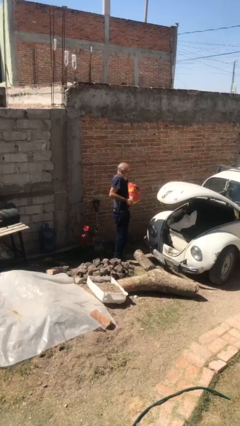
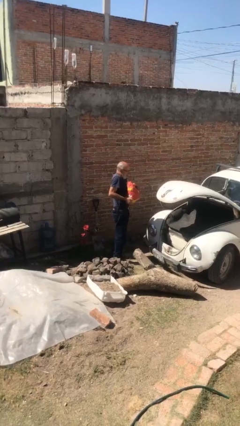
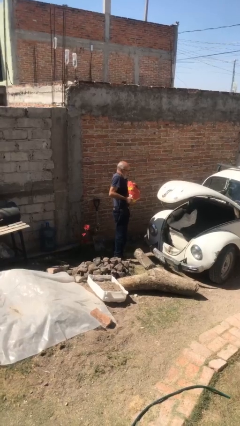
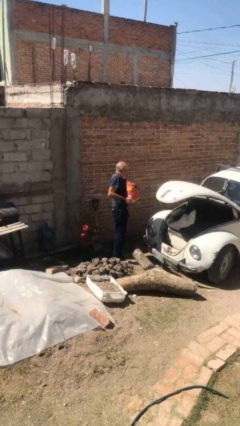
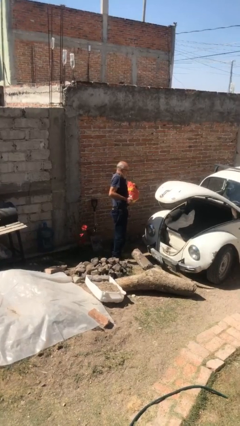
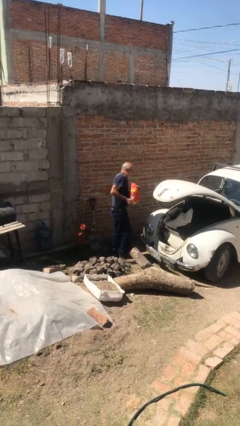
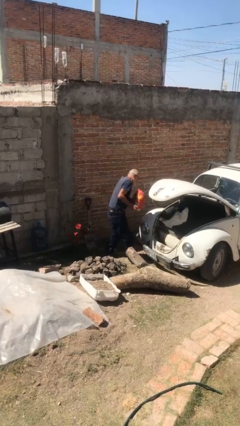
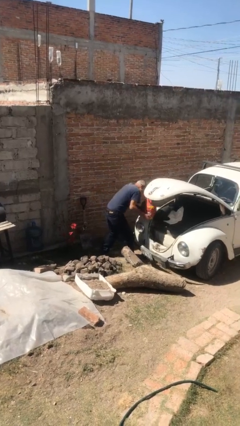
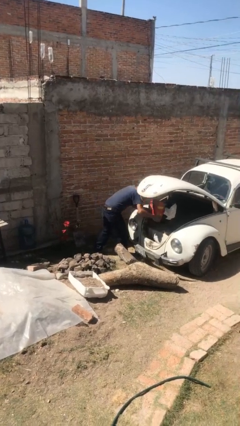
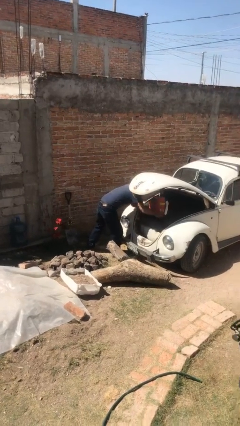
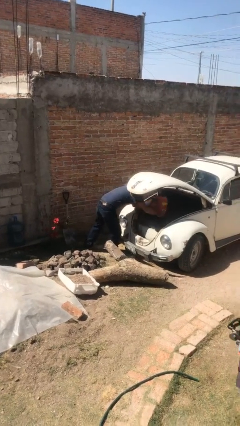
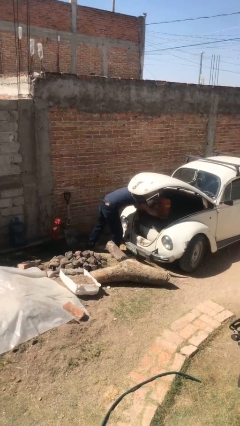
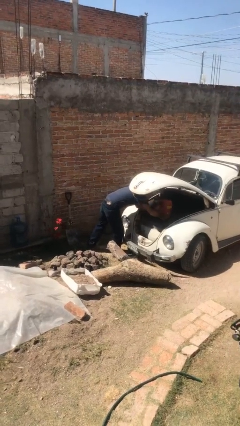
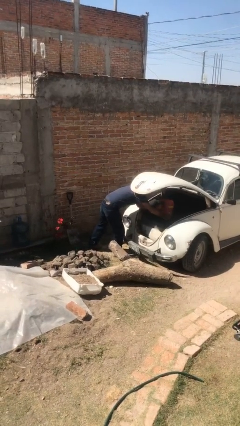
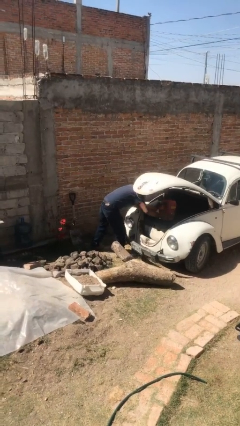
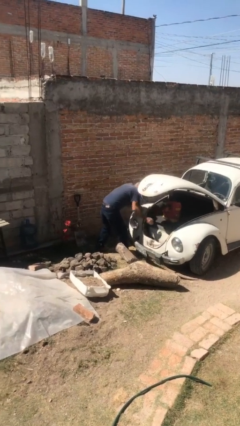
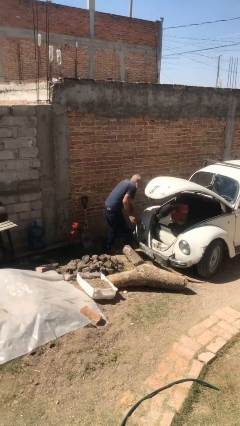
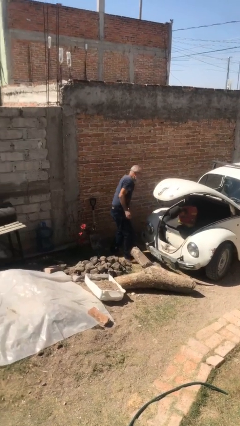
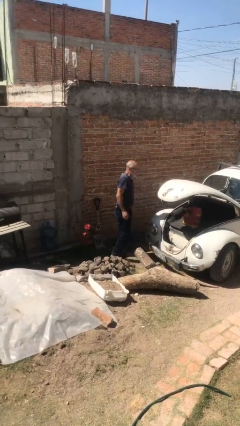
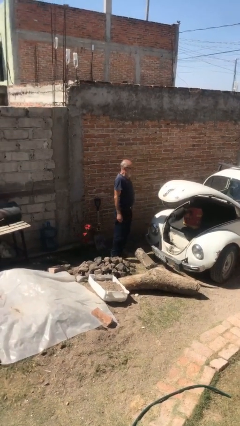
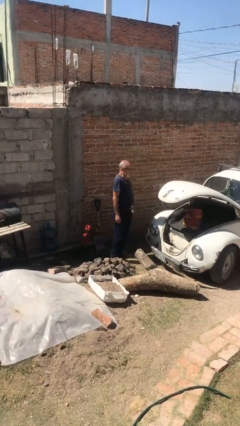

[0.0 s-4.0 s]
person loads car

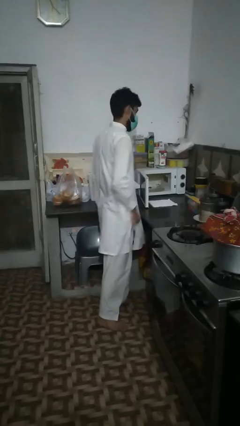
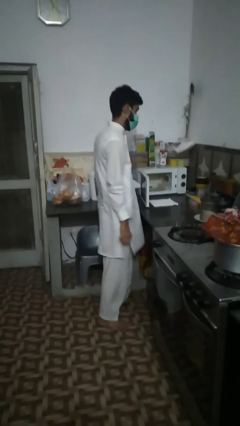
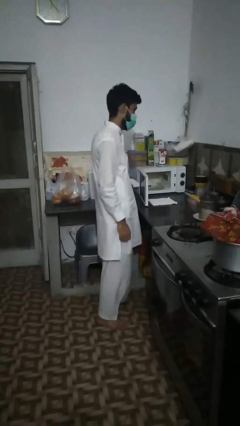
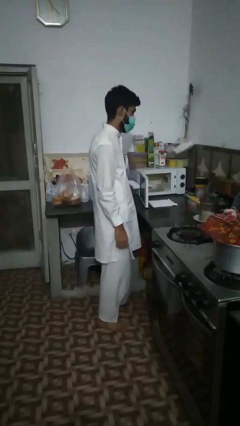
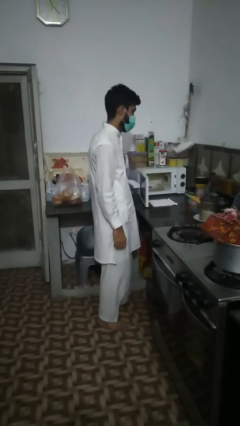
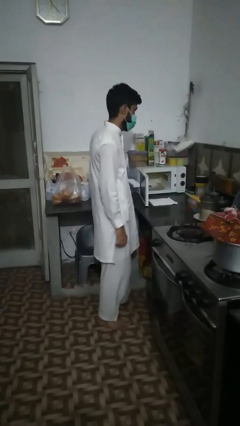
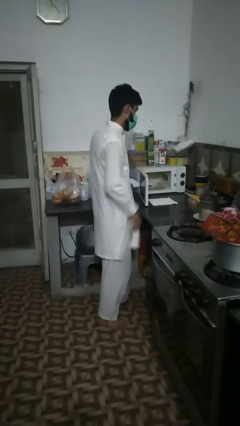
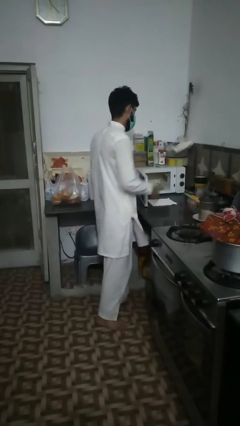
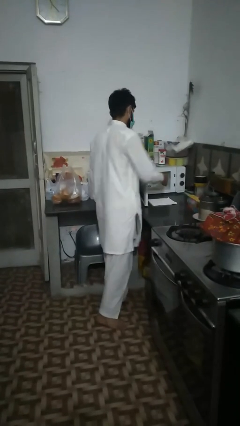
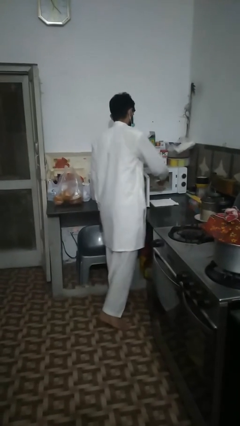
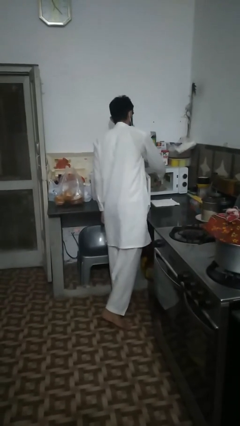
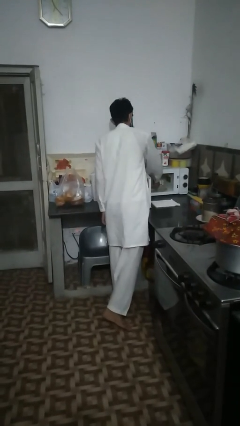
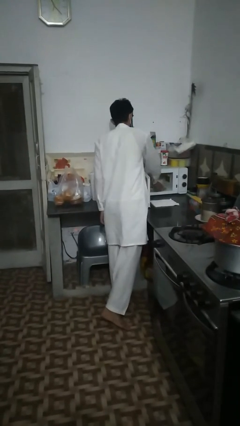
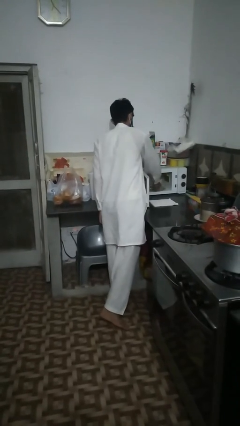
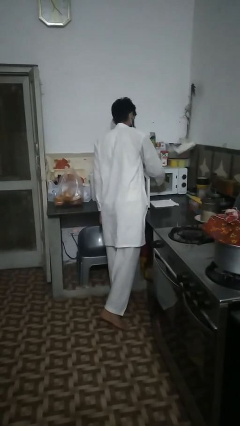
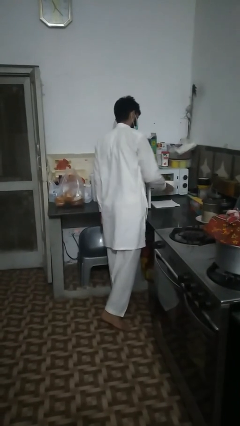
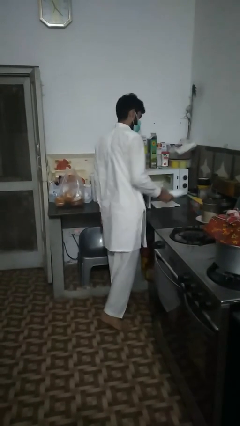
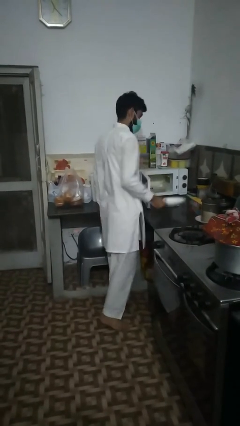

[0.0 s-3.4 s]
person takes object from microwave

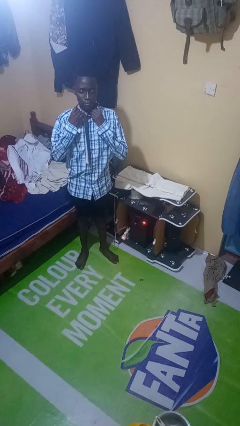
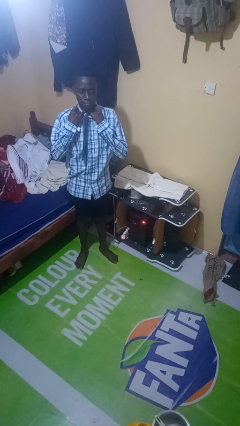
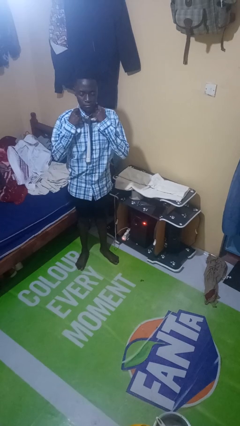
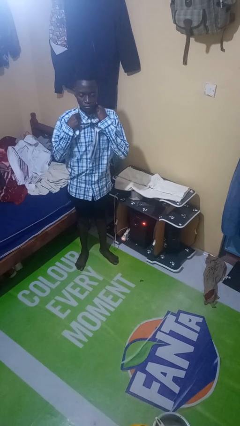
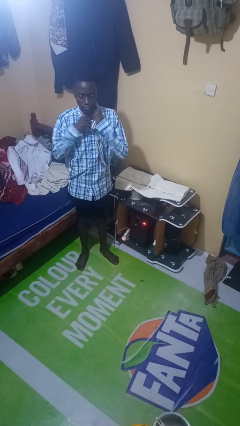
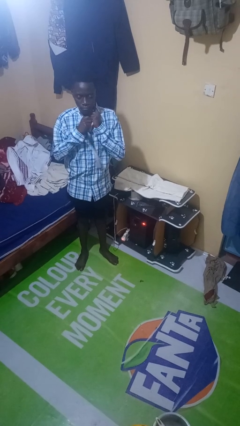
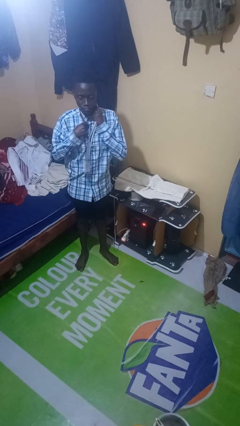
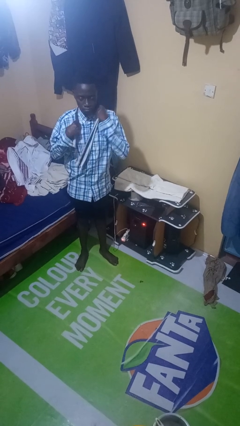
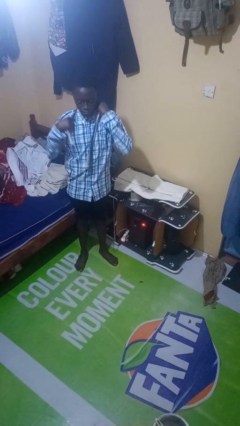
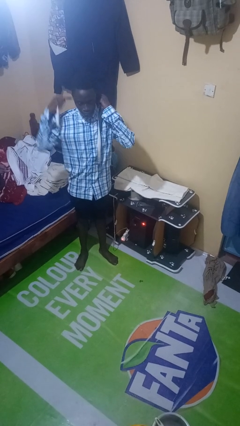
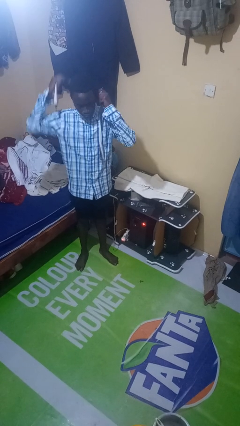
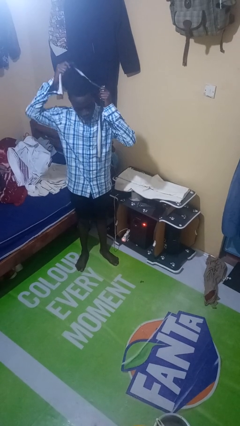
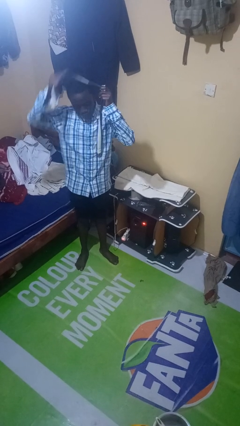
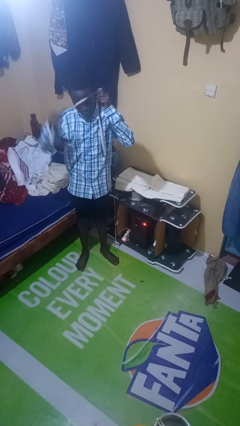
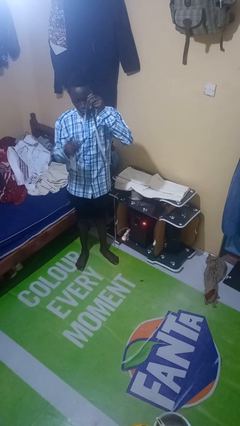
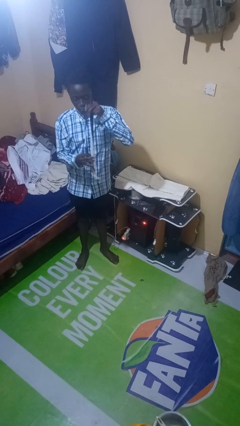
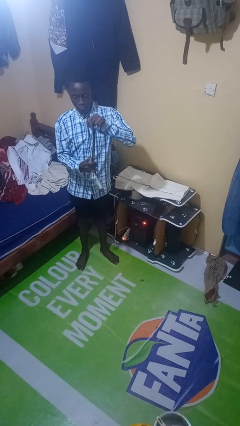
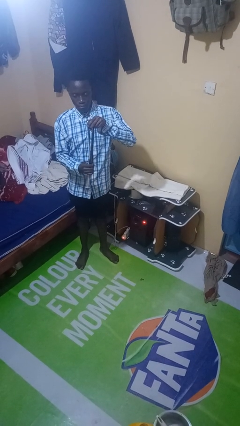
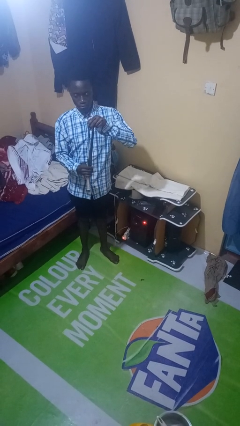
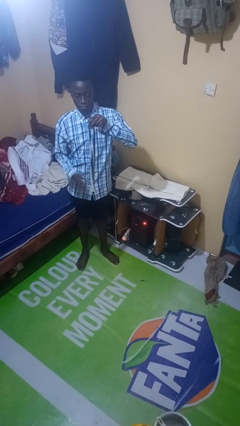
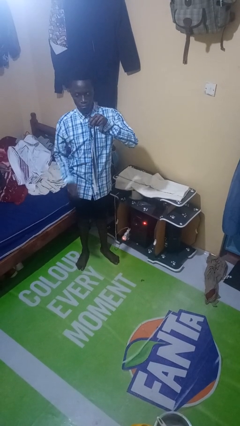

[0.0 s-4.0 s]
person takes off necktie

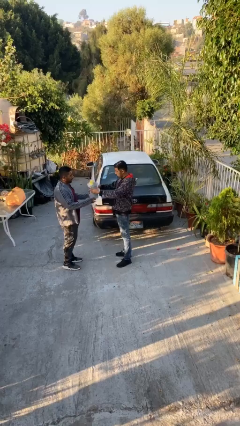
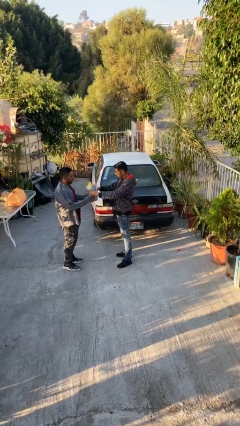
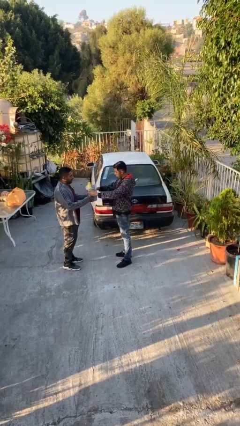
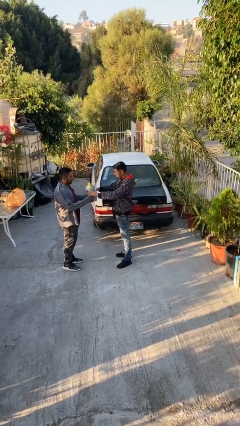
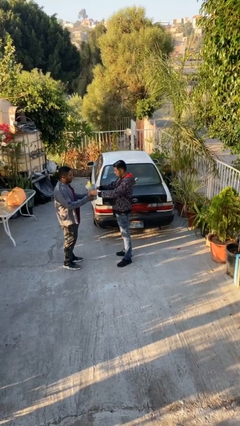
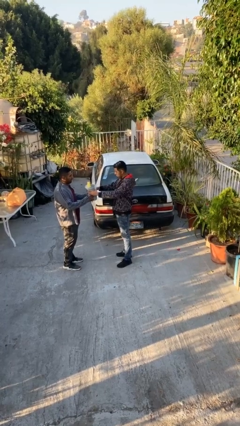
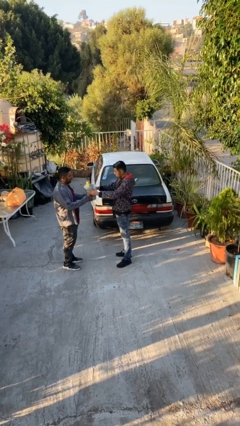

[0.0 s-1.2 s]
person transfers object to person

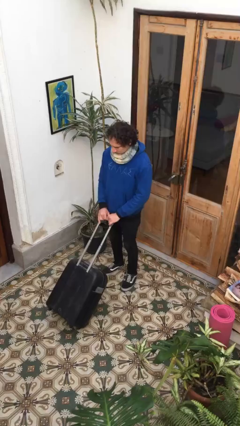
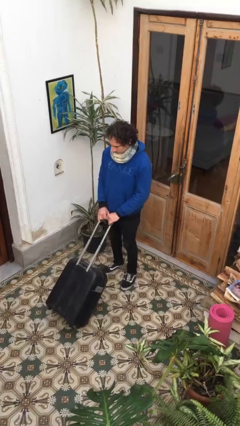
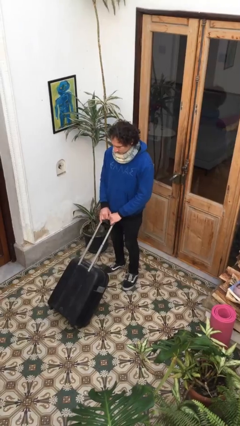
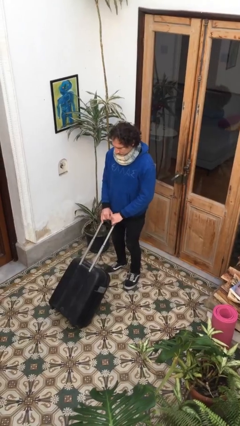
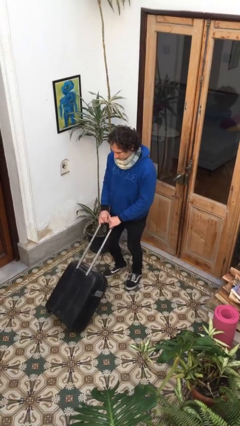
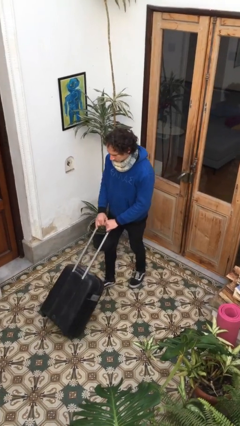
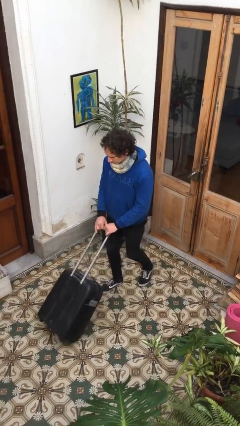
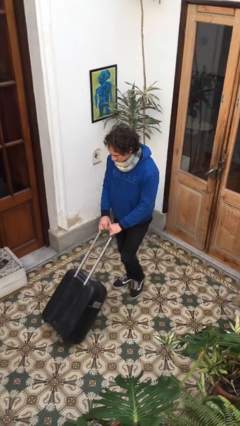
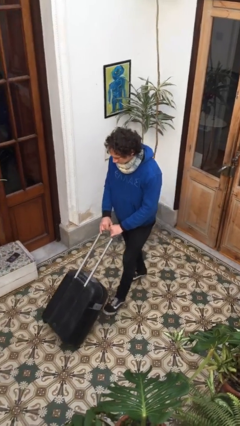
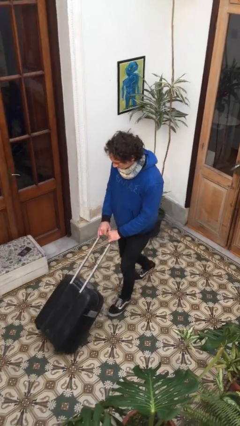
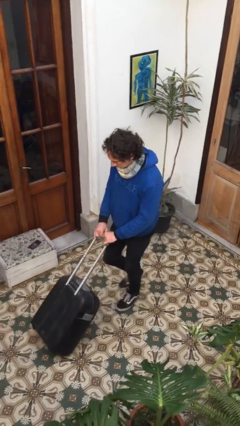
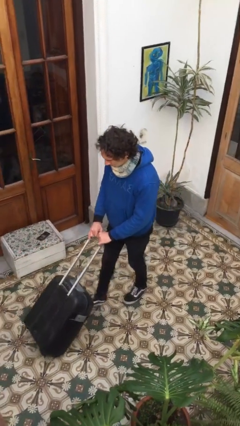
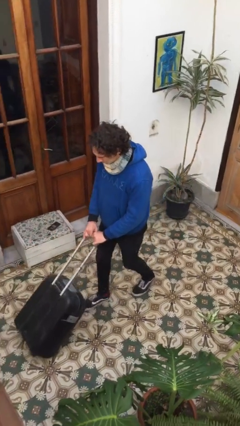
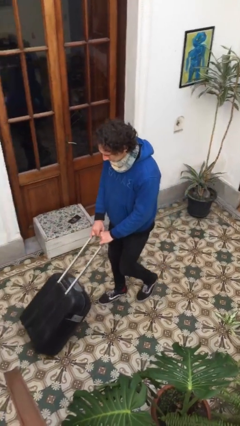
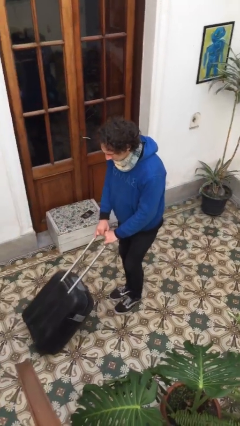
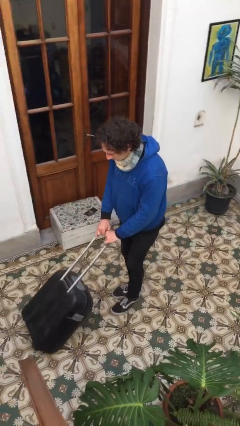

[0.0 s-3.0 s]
person pushes wheeled cart

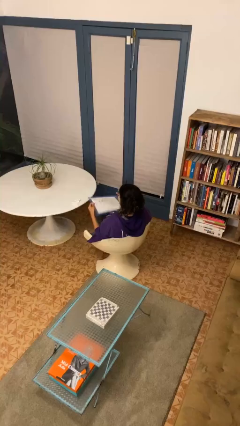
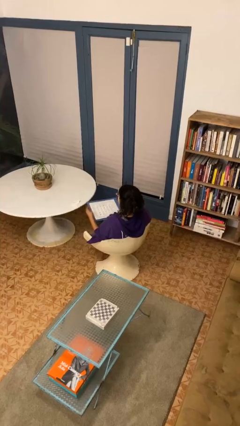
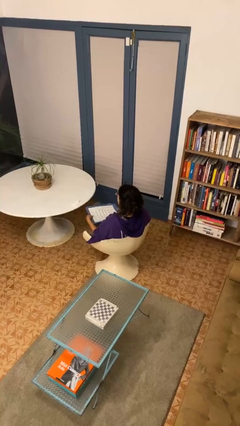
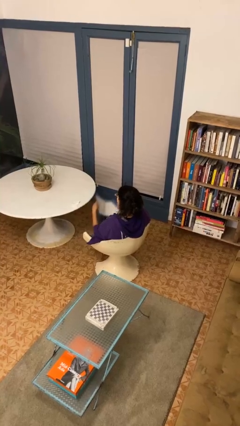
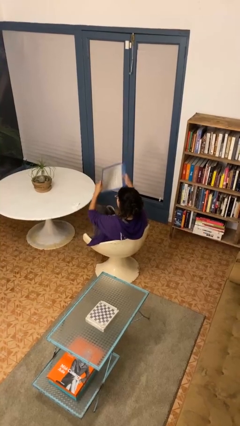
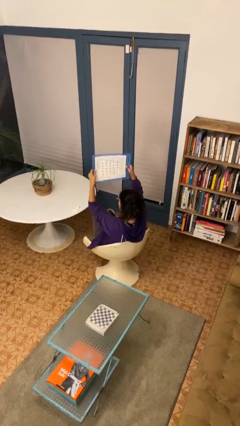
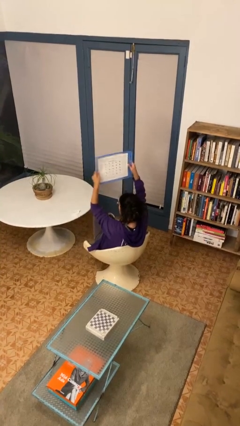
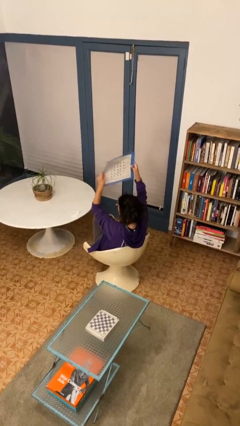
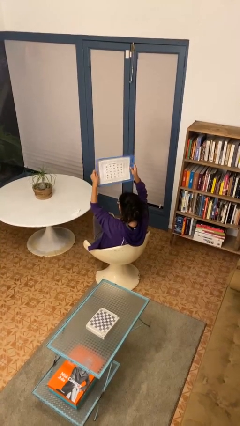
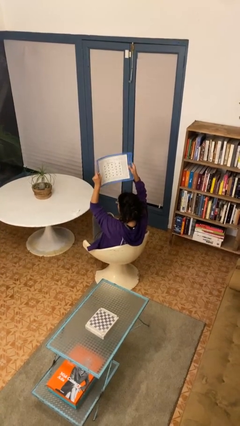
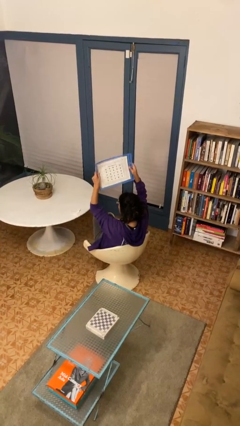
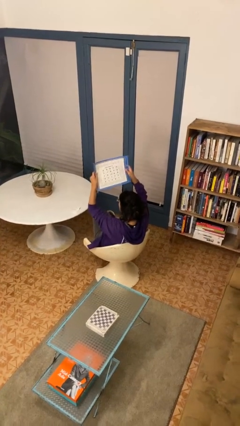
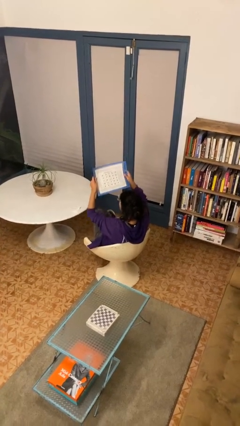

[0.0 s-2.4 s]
person holds object above head
